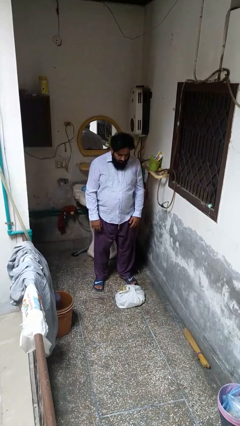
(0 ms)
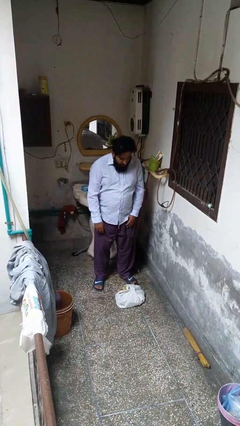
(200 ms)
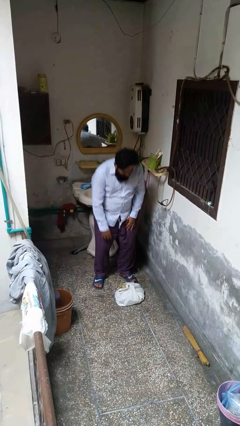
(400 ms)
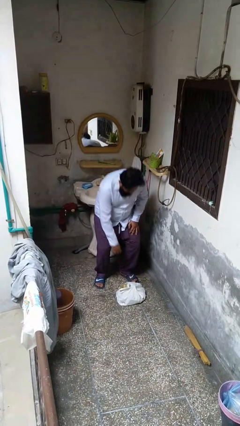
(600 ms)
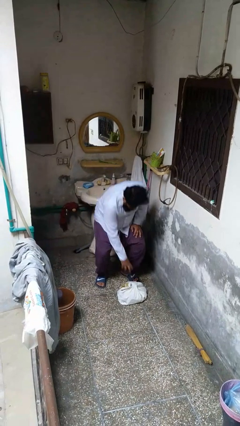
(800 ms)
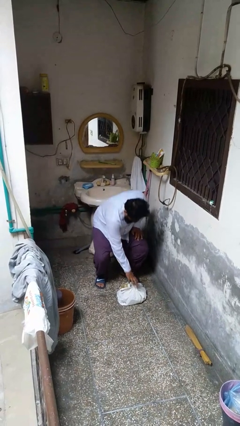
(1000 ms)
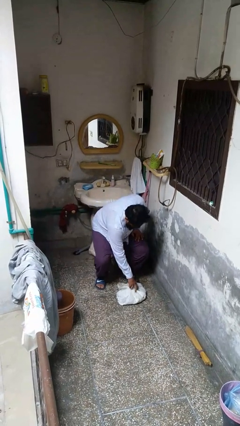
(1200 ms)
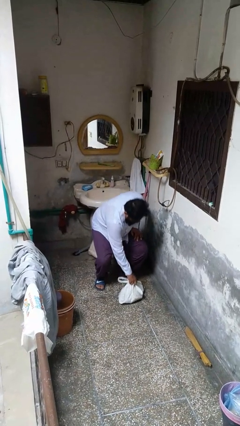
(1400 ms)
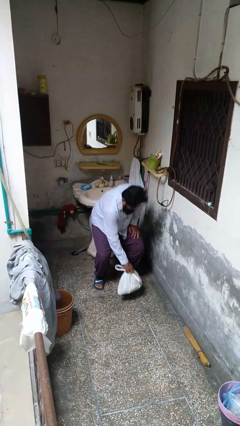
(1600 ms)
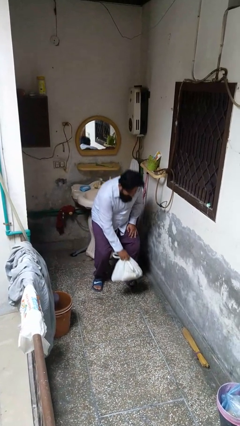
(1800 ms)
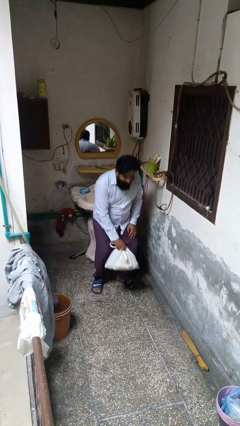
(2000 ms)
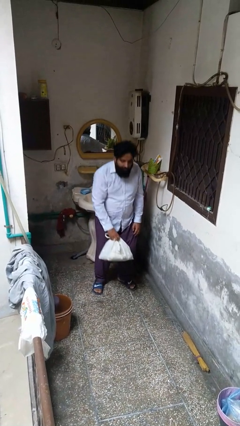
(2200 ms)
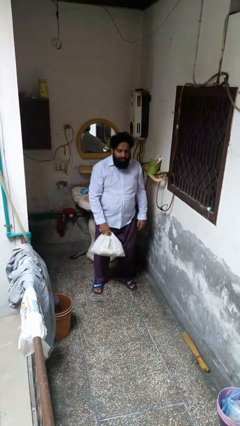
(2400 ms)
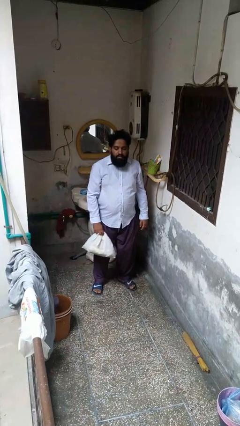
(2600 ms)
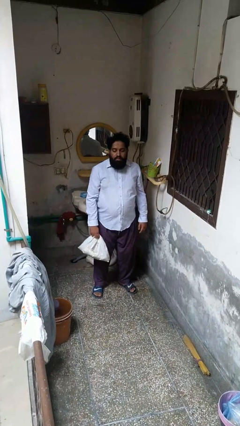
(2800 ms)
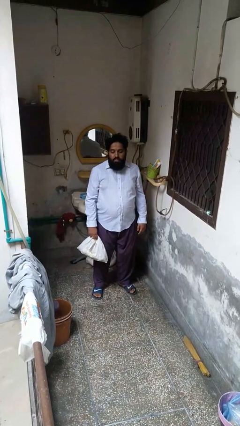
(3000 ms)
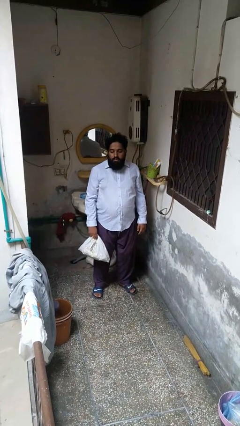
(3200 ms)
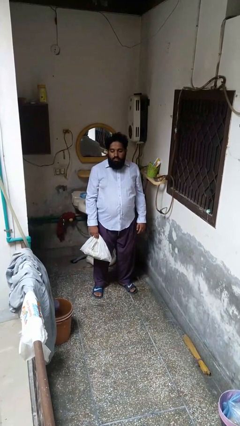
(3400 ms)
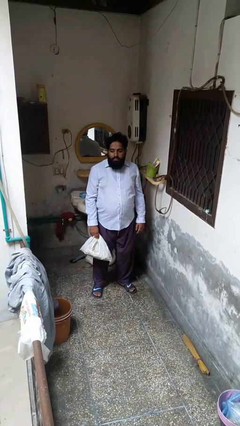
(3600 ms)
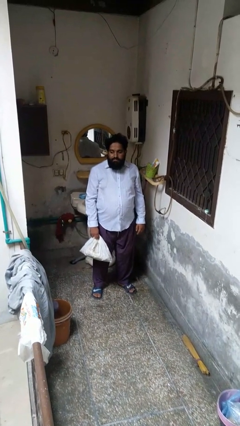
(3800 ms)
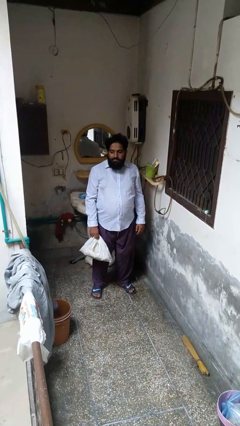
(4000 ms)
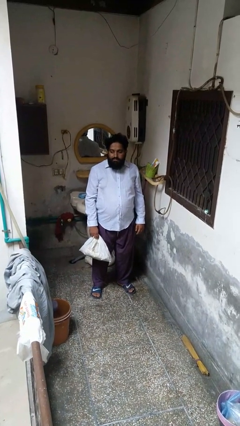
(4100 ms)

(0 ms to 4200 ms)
person picks up object from floor

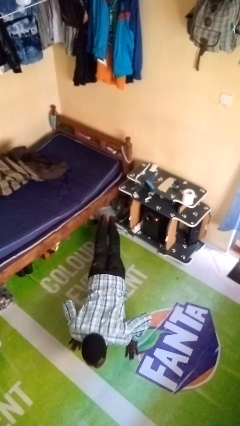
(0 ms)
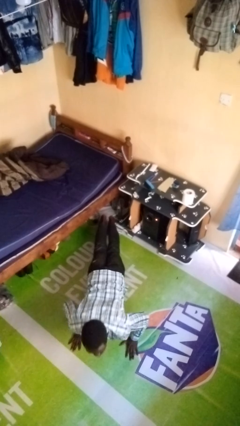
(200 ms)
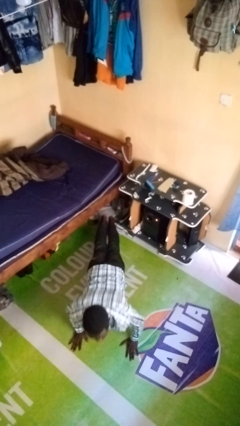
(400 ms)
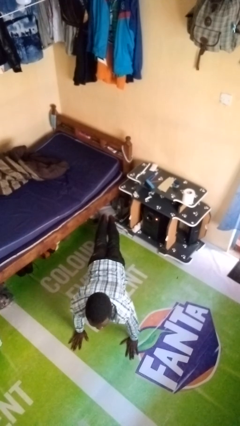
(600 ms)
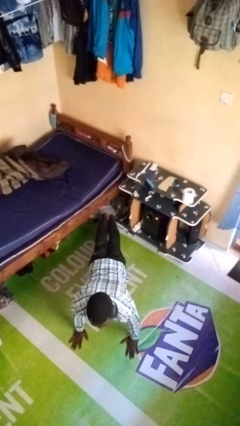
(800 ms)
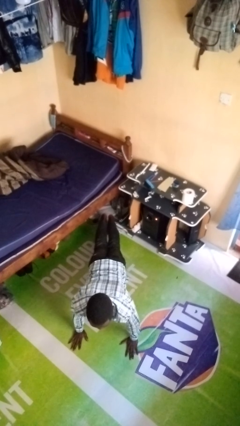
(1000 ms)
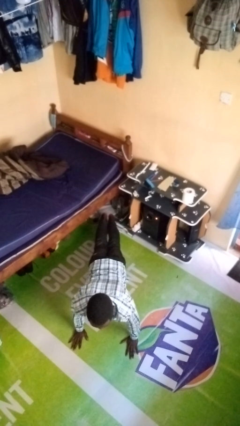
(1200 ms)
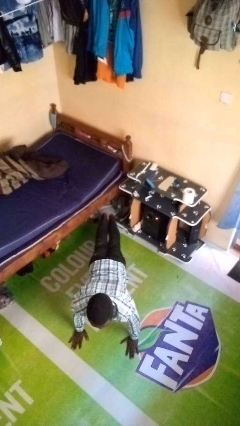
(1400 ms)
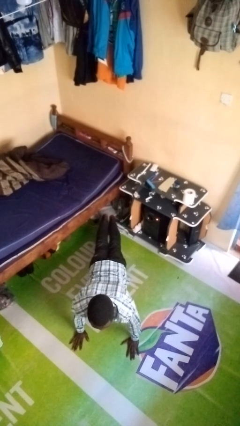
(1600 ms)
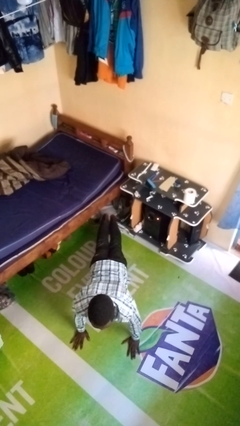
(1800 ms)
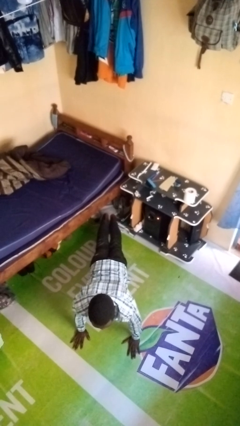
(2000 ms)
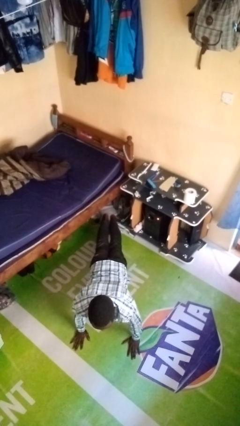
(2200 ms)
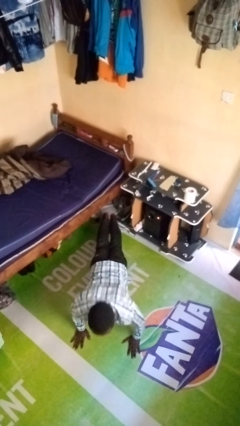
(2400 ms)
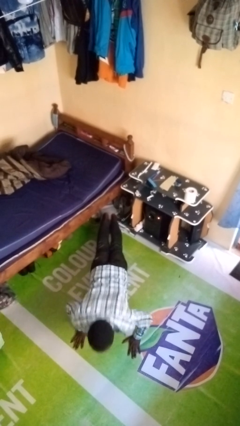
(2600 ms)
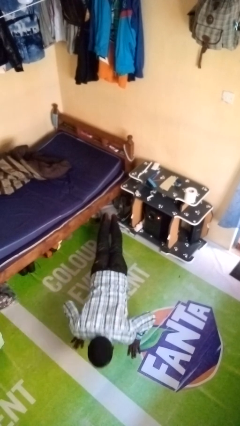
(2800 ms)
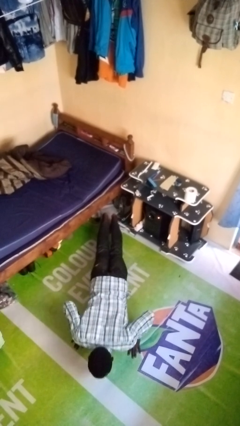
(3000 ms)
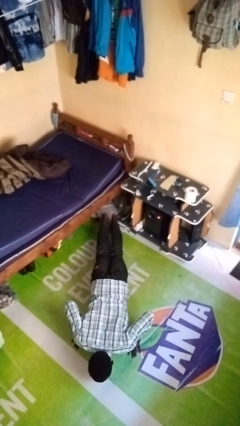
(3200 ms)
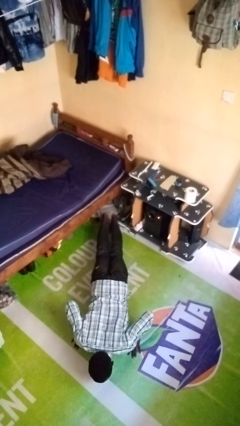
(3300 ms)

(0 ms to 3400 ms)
person exercises with pushup

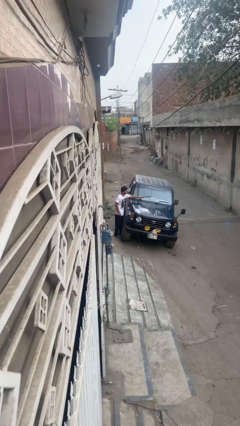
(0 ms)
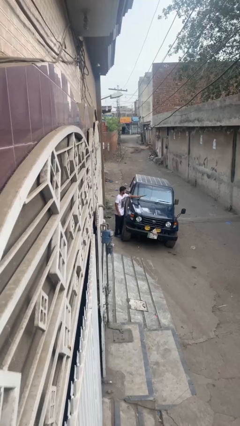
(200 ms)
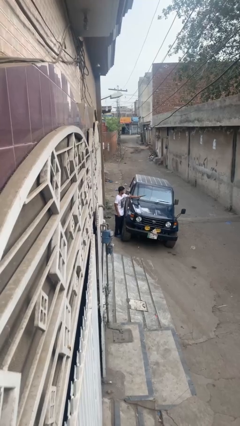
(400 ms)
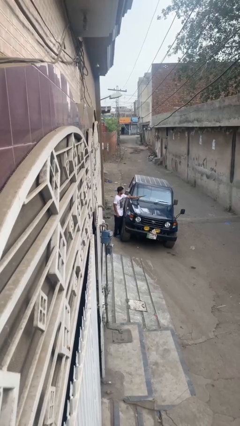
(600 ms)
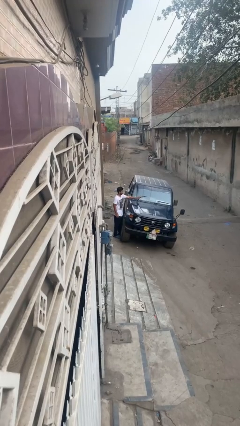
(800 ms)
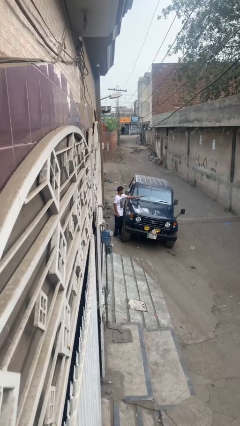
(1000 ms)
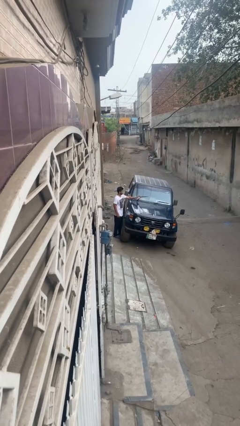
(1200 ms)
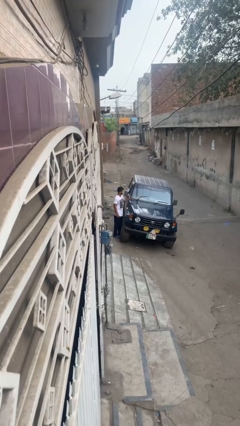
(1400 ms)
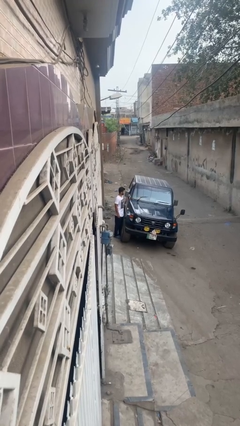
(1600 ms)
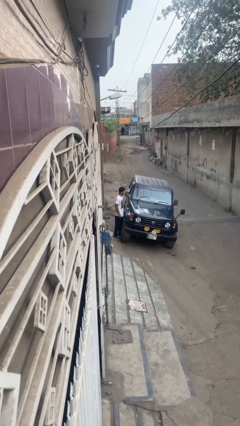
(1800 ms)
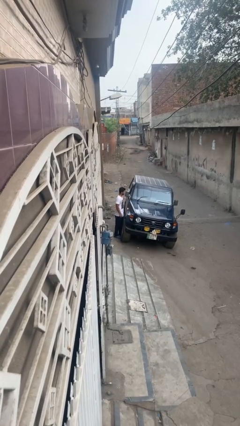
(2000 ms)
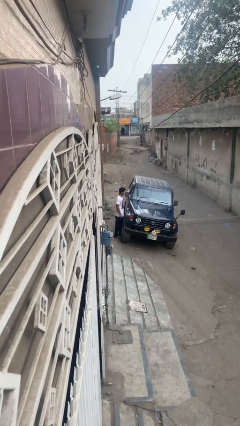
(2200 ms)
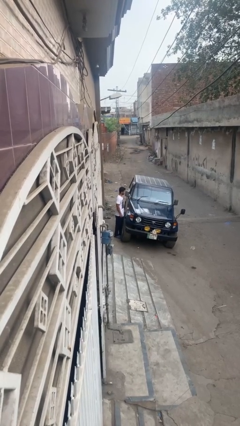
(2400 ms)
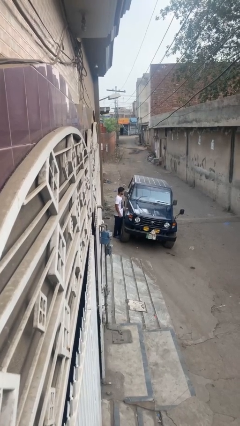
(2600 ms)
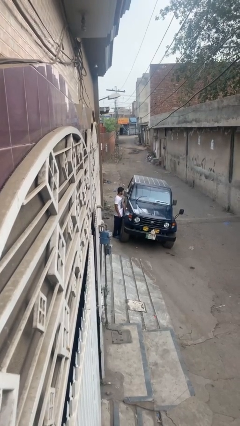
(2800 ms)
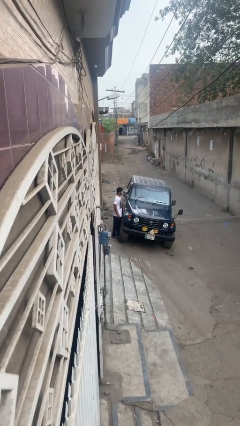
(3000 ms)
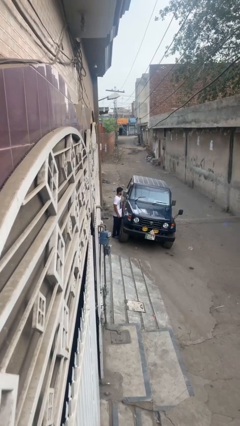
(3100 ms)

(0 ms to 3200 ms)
person flips up car wipers

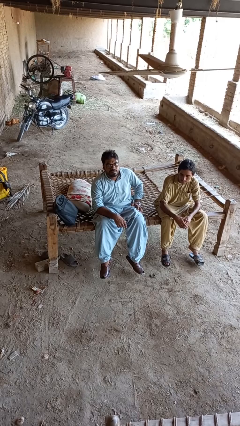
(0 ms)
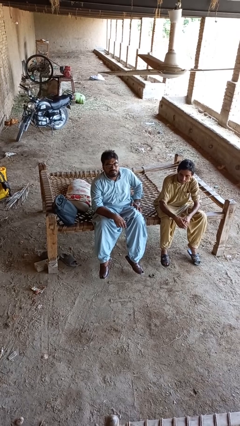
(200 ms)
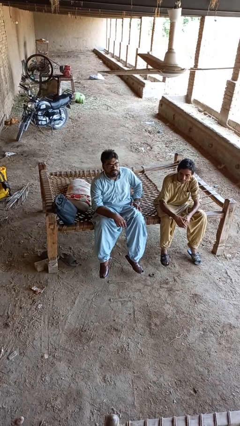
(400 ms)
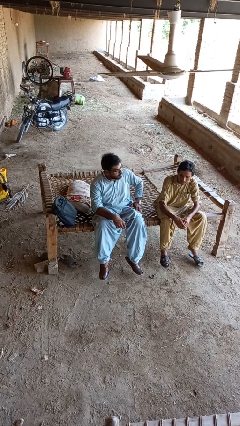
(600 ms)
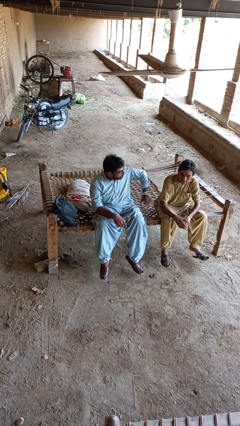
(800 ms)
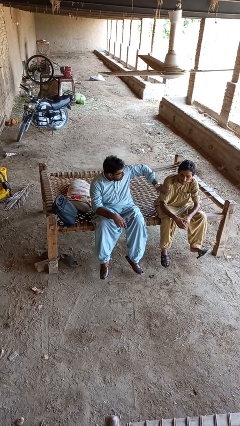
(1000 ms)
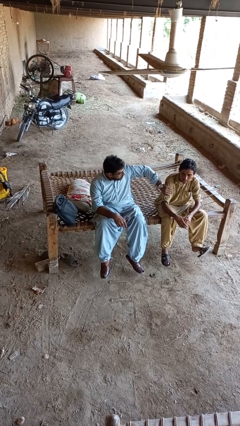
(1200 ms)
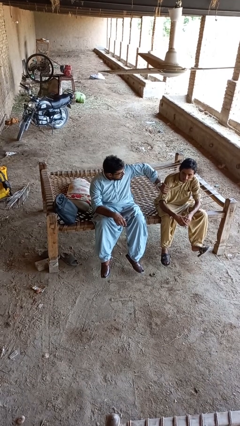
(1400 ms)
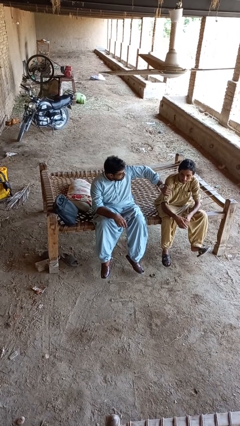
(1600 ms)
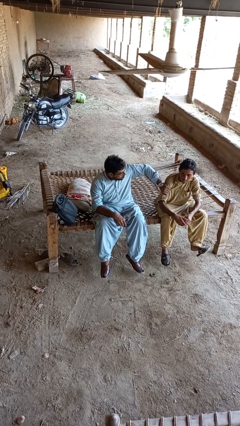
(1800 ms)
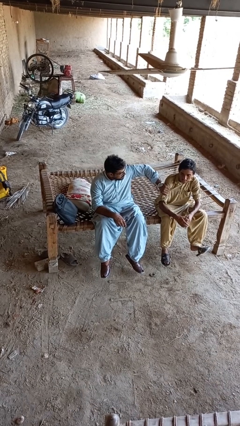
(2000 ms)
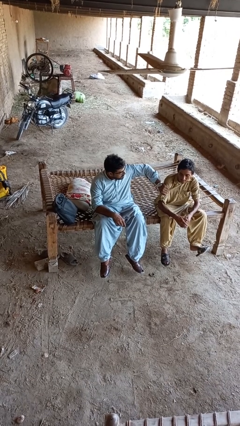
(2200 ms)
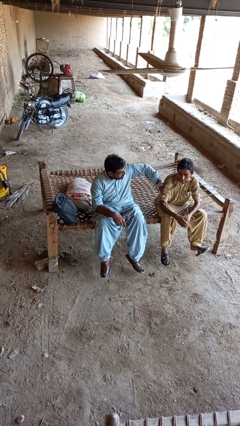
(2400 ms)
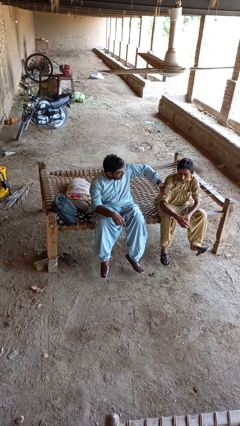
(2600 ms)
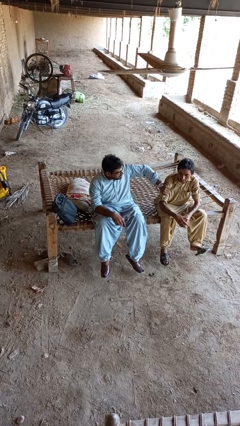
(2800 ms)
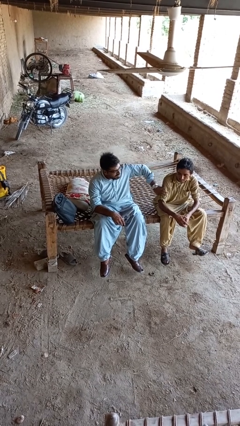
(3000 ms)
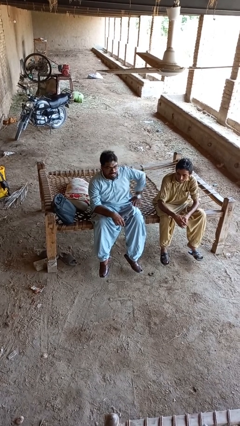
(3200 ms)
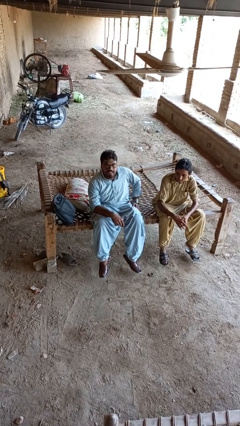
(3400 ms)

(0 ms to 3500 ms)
person grabs person by bicep

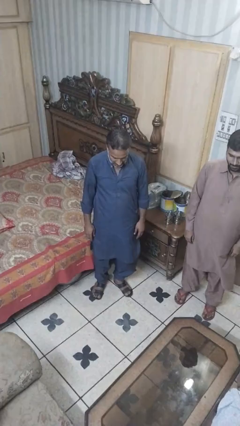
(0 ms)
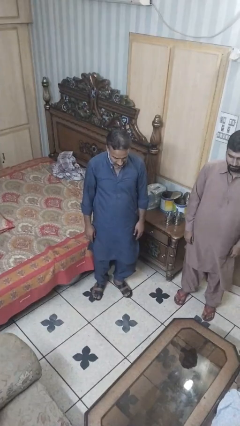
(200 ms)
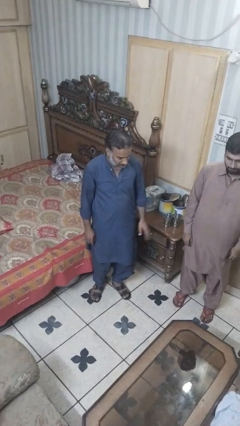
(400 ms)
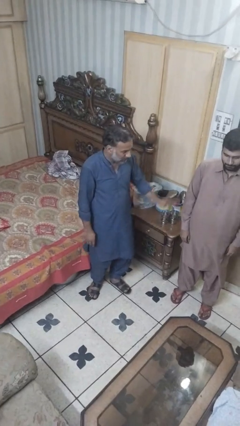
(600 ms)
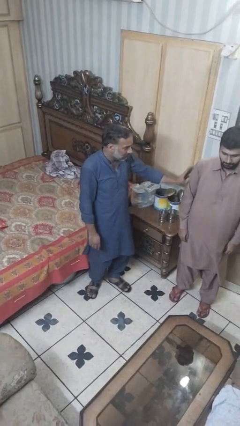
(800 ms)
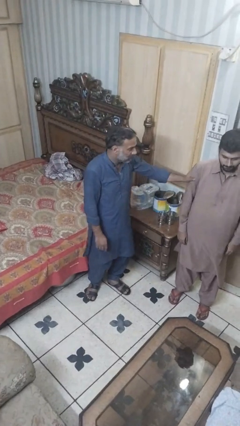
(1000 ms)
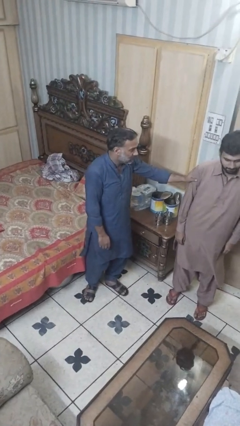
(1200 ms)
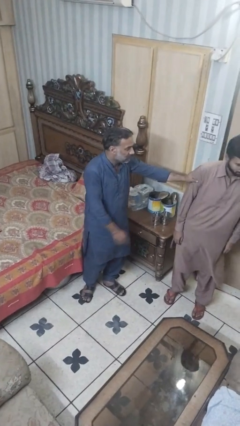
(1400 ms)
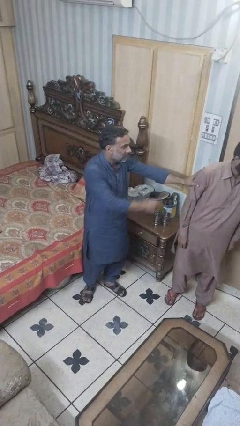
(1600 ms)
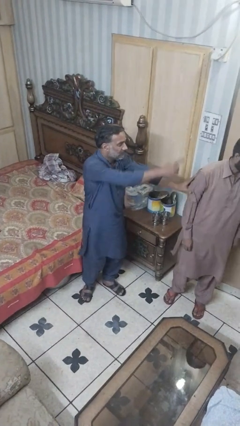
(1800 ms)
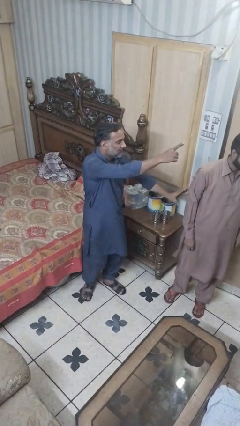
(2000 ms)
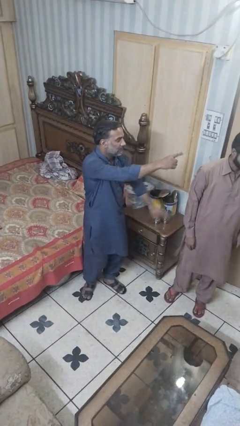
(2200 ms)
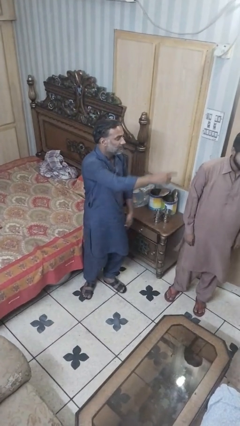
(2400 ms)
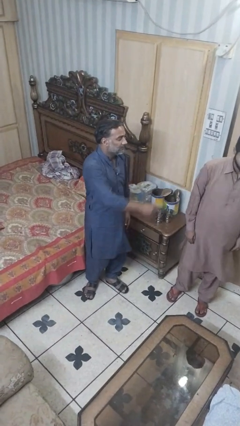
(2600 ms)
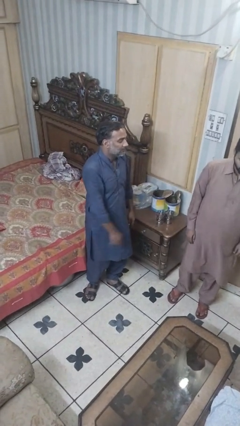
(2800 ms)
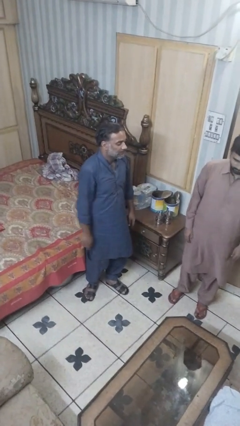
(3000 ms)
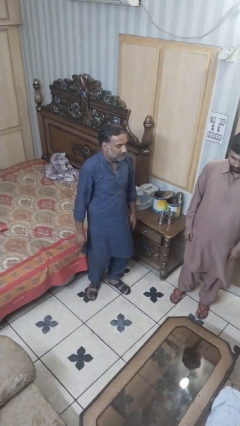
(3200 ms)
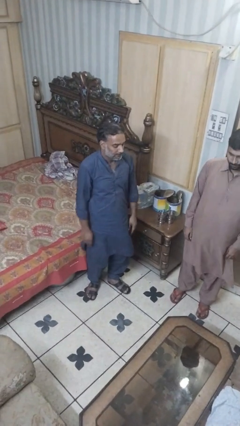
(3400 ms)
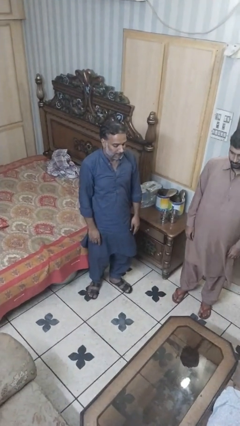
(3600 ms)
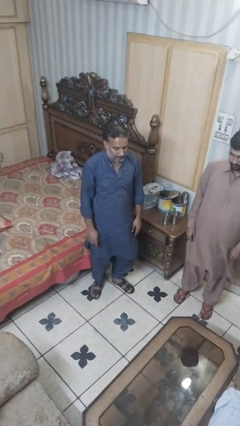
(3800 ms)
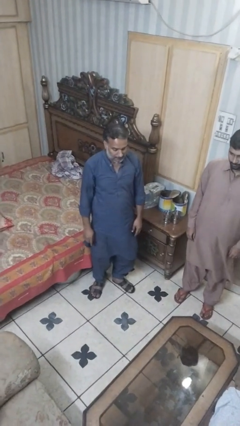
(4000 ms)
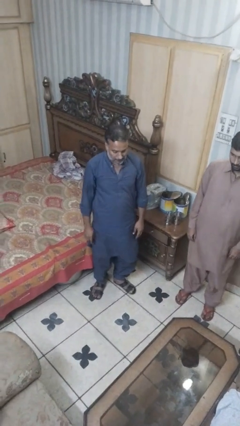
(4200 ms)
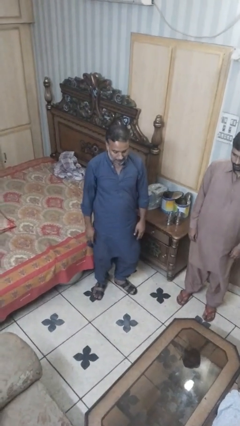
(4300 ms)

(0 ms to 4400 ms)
person shoves person
